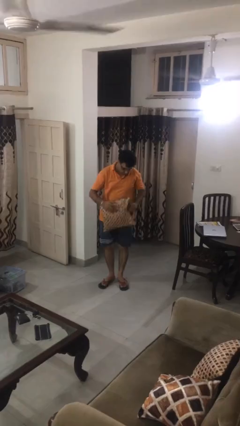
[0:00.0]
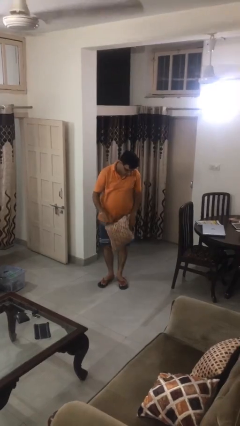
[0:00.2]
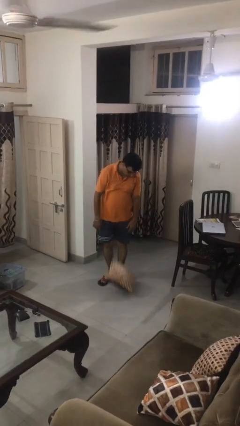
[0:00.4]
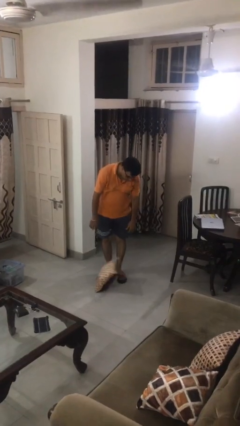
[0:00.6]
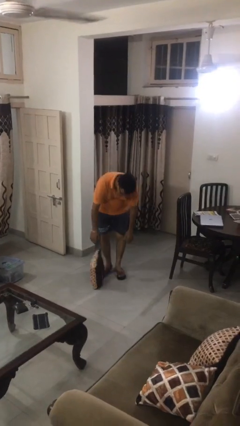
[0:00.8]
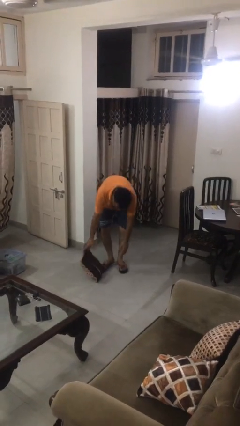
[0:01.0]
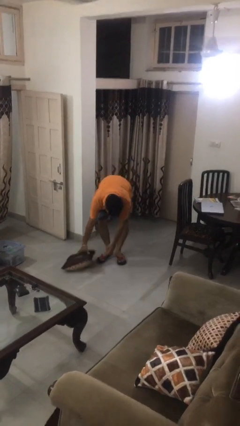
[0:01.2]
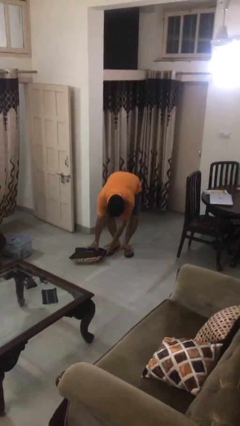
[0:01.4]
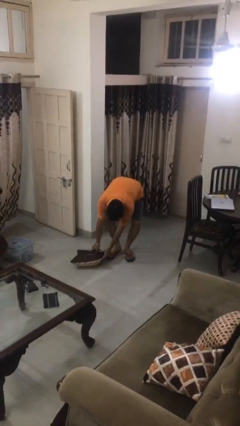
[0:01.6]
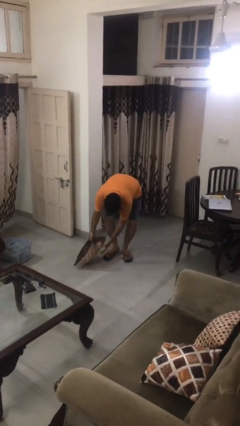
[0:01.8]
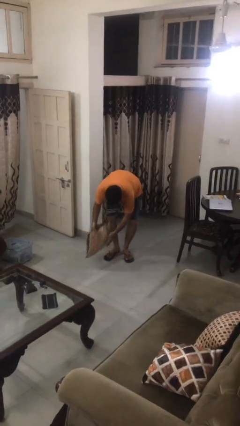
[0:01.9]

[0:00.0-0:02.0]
person drops object

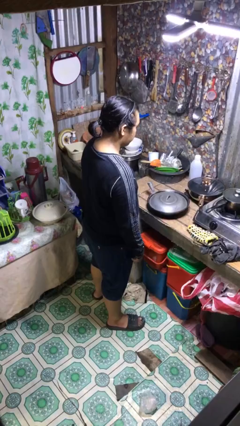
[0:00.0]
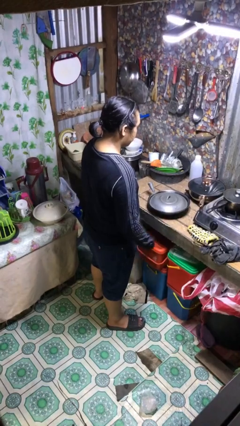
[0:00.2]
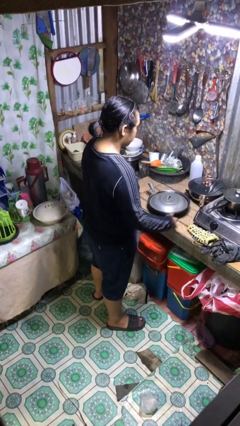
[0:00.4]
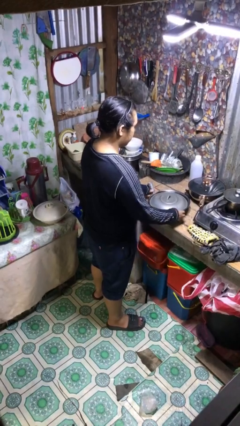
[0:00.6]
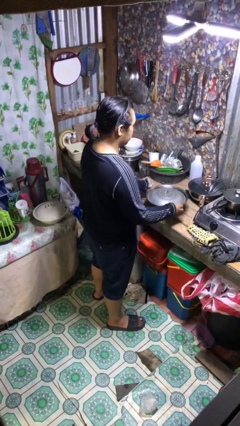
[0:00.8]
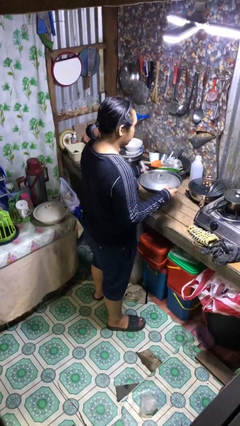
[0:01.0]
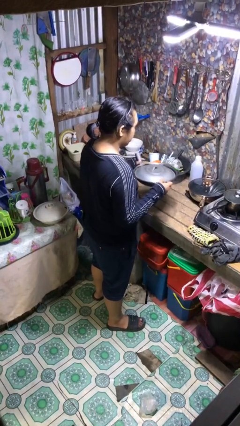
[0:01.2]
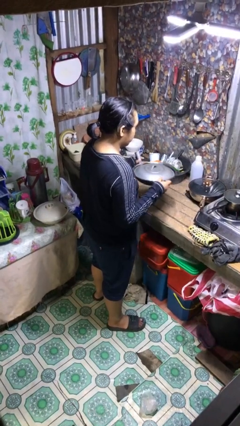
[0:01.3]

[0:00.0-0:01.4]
person picks up object from countertop

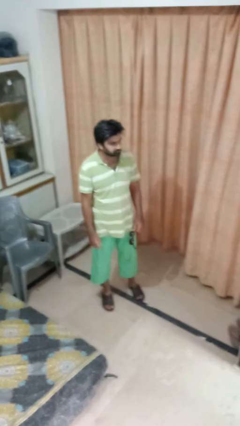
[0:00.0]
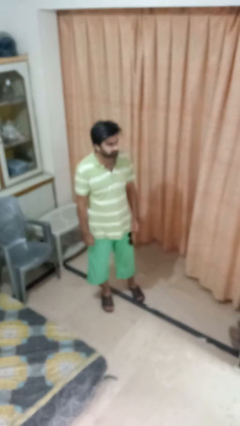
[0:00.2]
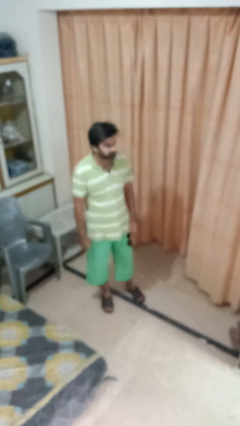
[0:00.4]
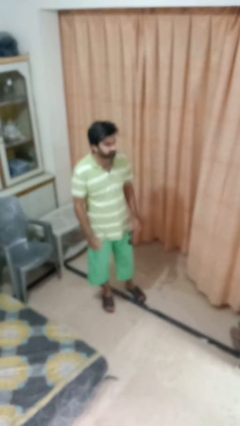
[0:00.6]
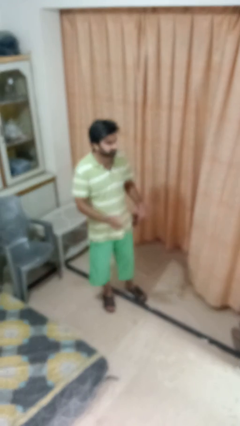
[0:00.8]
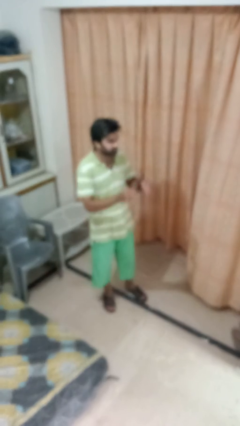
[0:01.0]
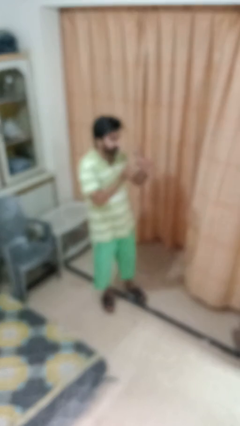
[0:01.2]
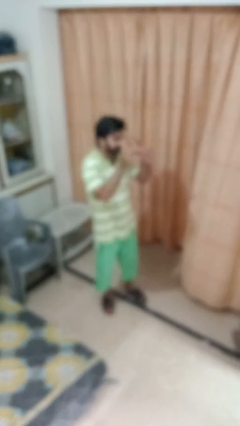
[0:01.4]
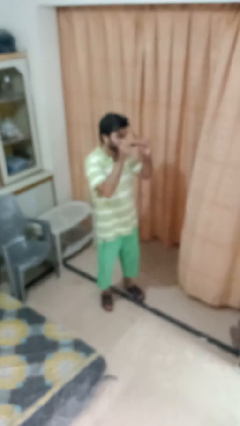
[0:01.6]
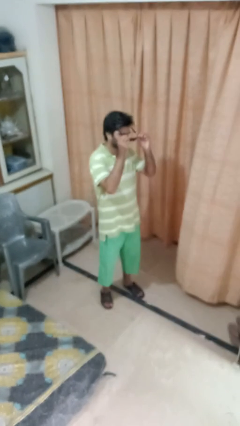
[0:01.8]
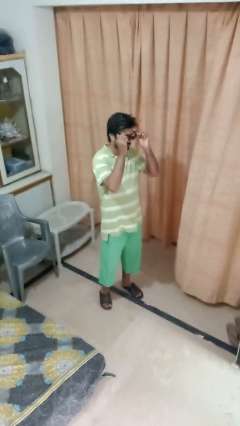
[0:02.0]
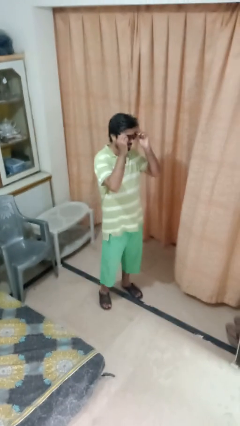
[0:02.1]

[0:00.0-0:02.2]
person puts on sunglasses

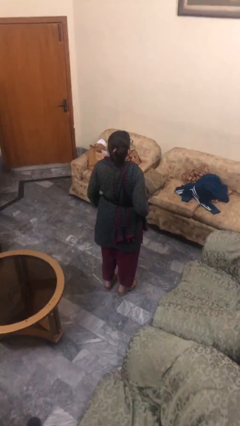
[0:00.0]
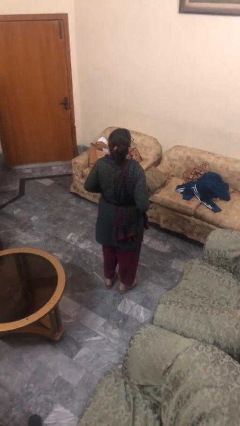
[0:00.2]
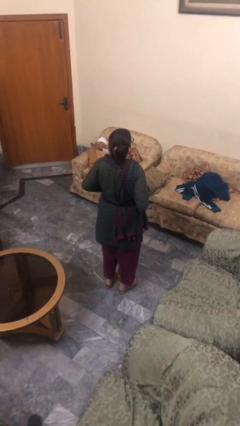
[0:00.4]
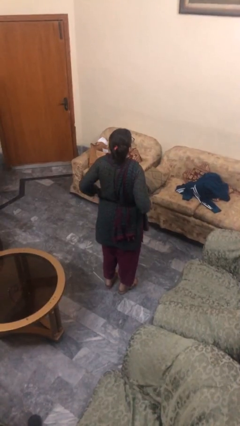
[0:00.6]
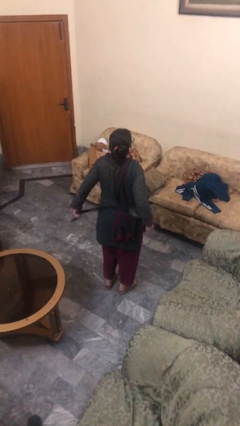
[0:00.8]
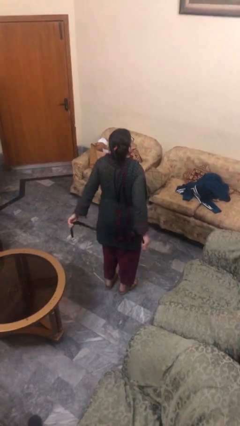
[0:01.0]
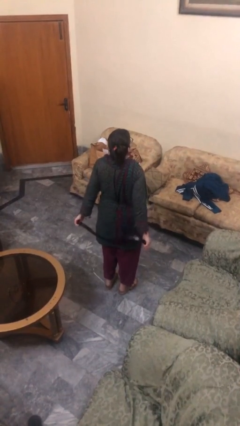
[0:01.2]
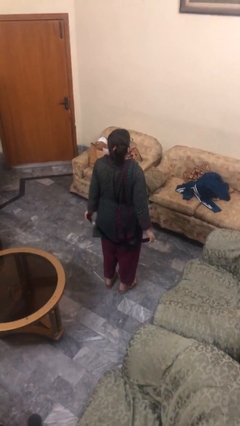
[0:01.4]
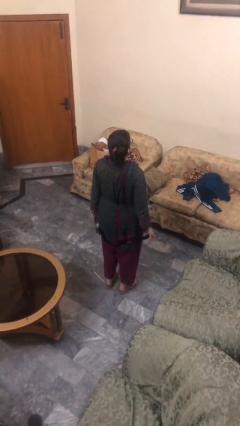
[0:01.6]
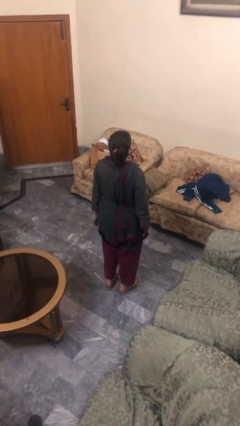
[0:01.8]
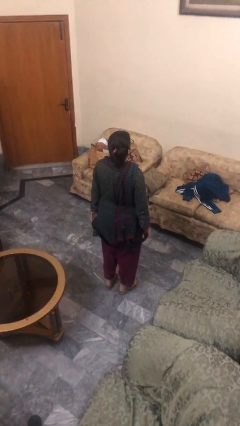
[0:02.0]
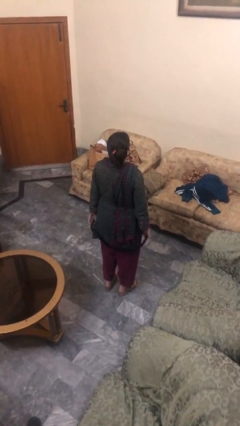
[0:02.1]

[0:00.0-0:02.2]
person takes off belt

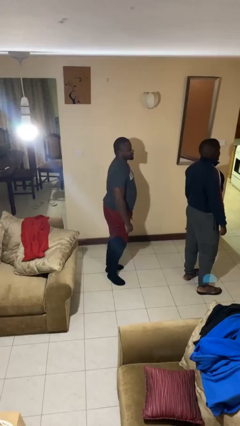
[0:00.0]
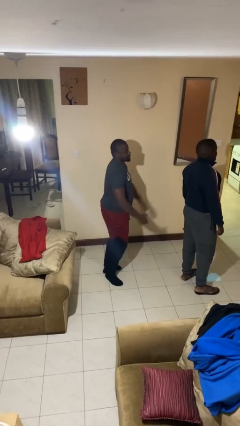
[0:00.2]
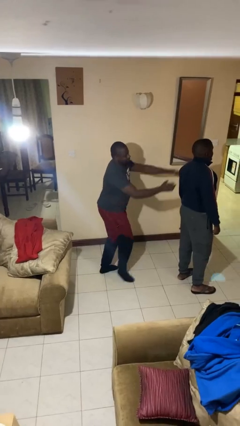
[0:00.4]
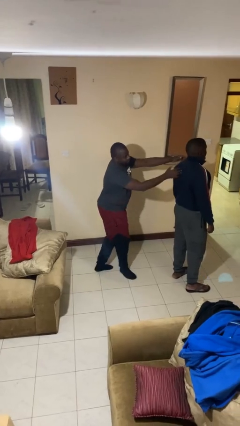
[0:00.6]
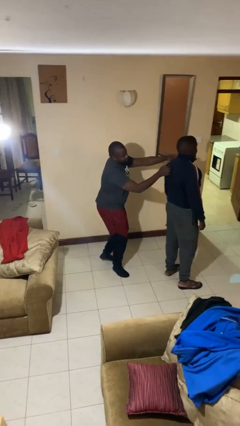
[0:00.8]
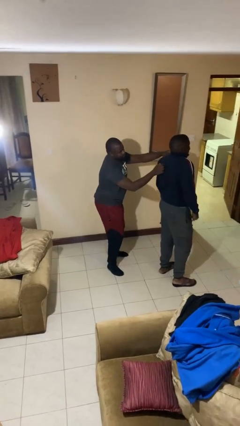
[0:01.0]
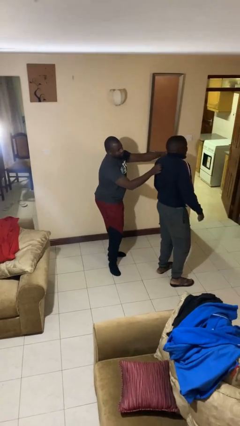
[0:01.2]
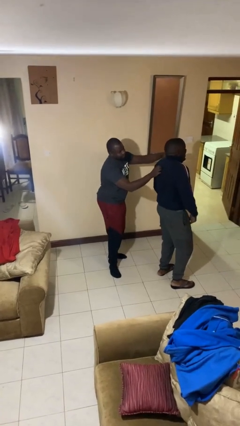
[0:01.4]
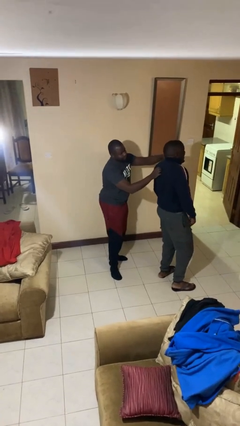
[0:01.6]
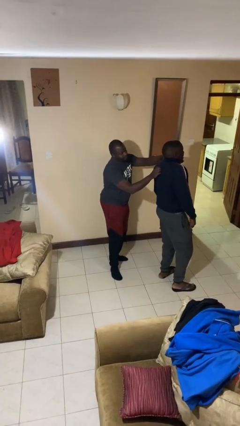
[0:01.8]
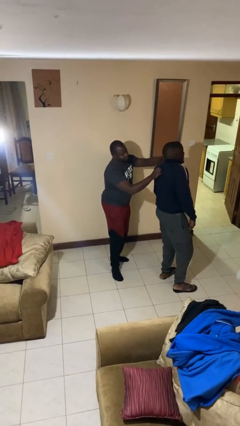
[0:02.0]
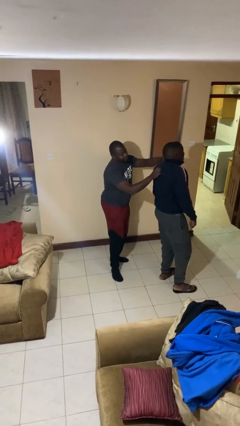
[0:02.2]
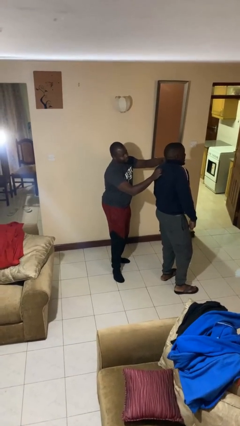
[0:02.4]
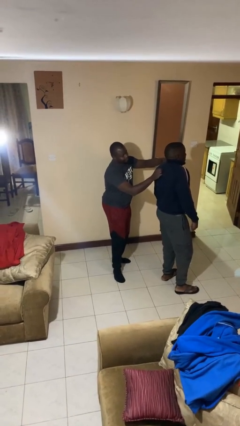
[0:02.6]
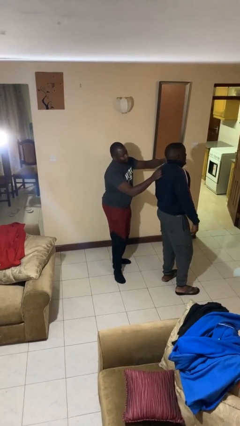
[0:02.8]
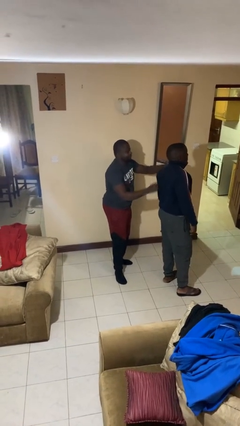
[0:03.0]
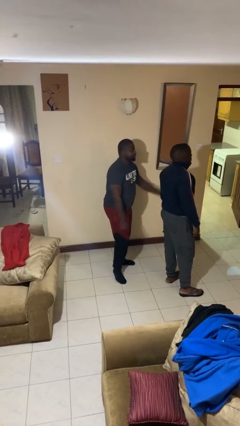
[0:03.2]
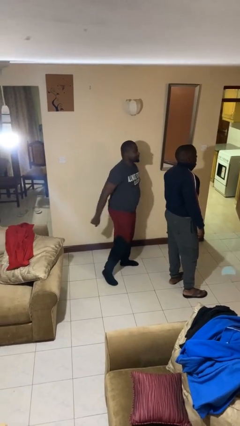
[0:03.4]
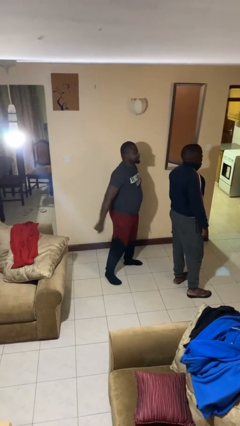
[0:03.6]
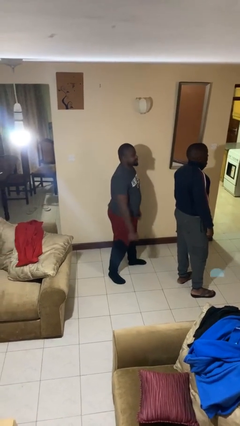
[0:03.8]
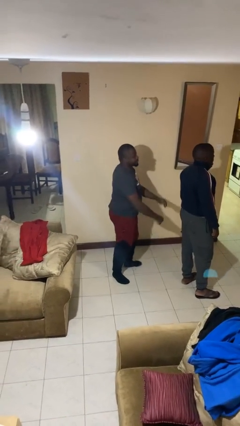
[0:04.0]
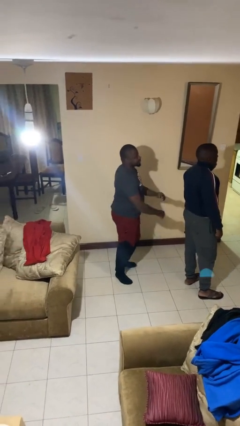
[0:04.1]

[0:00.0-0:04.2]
person tickles person

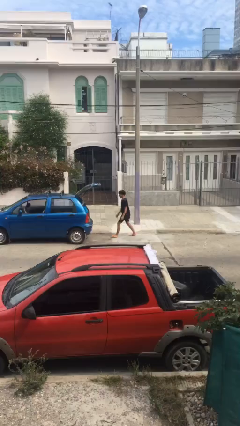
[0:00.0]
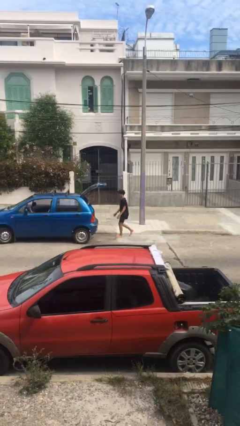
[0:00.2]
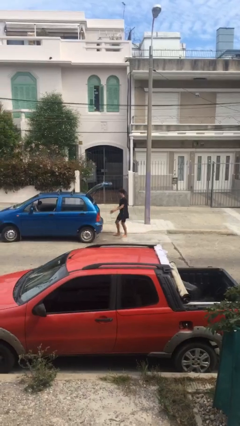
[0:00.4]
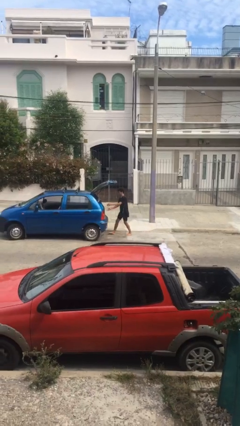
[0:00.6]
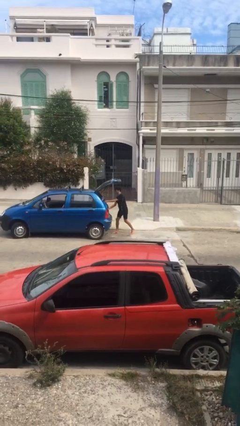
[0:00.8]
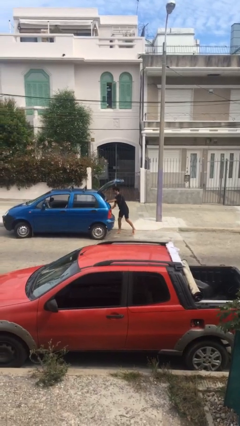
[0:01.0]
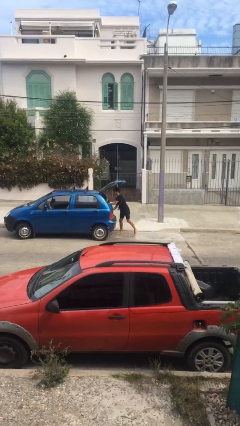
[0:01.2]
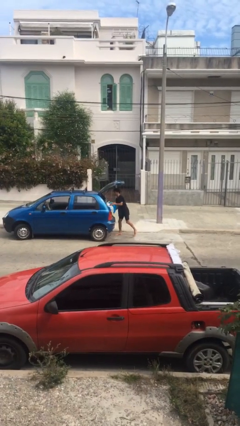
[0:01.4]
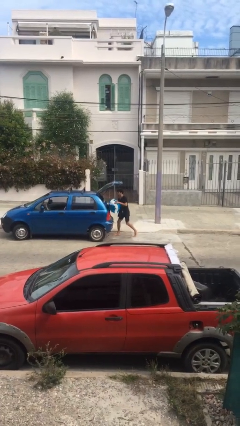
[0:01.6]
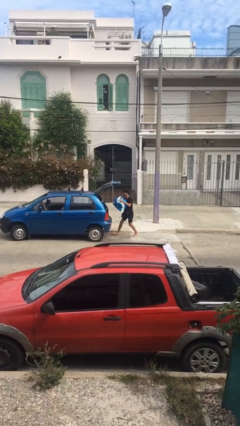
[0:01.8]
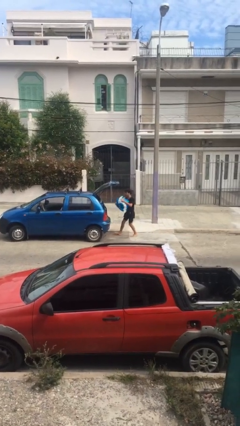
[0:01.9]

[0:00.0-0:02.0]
person unloads car

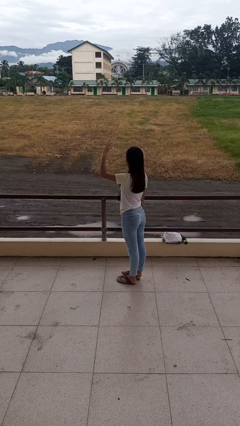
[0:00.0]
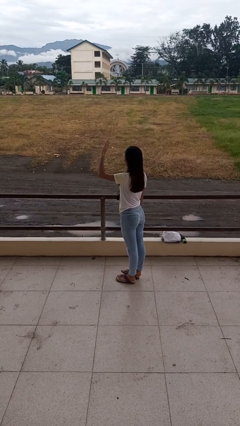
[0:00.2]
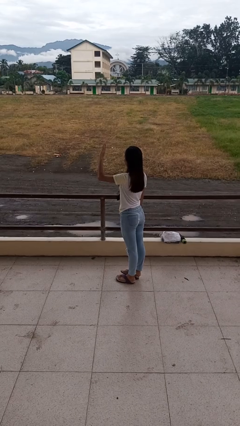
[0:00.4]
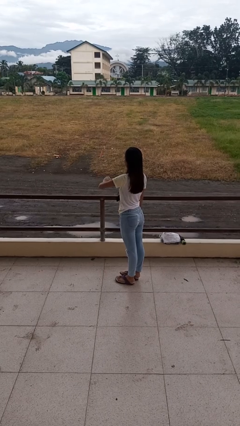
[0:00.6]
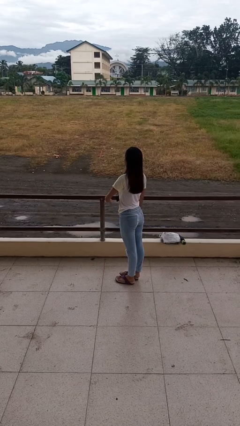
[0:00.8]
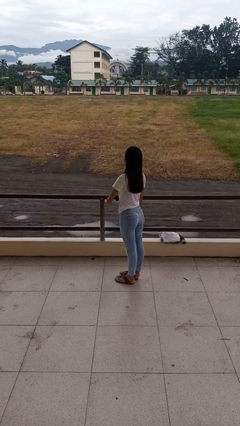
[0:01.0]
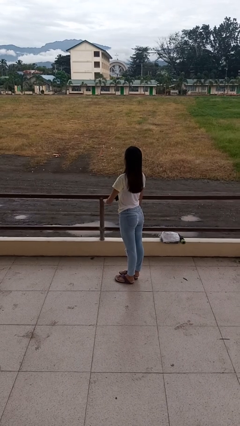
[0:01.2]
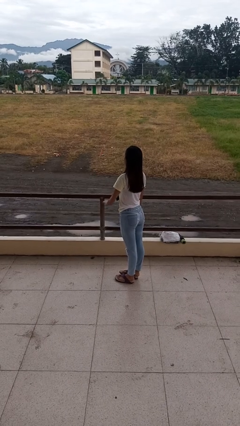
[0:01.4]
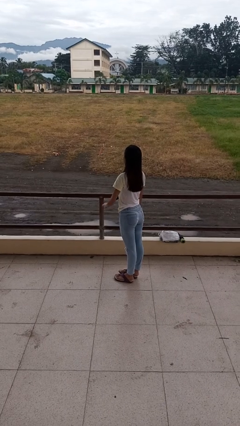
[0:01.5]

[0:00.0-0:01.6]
person gestures swipe down

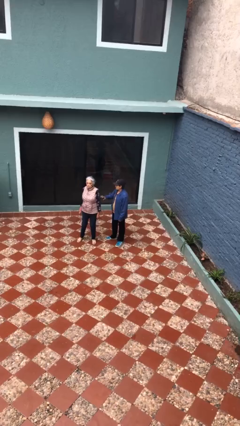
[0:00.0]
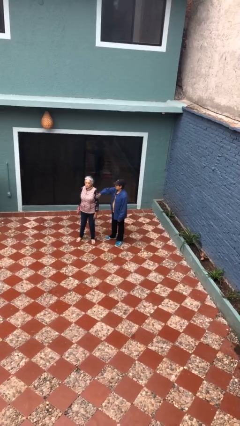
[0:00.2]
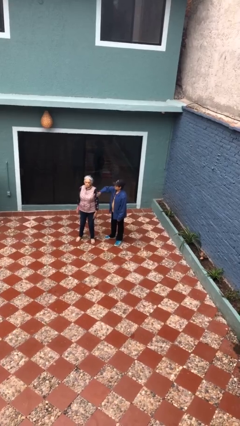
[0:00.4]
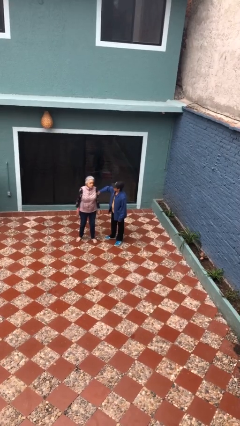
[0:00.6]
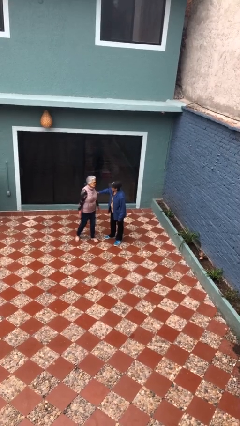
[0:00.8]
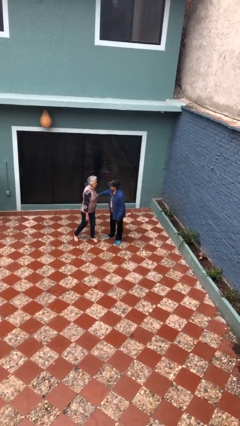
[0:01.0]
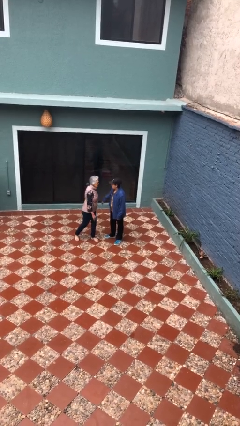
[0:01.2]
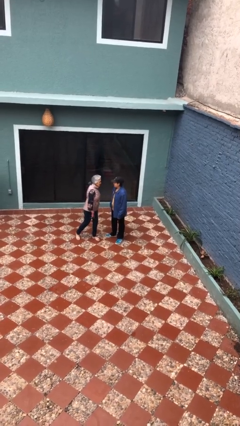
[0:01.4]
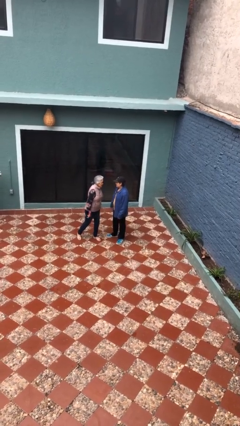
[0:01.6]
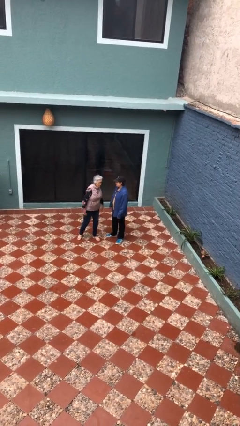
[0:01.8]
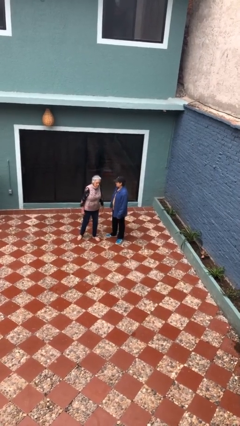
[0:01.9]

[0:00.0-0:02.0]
person grabs person by bicep
